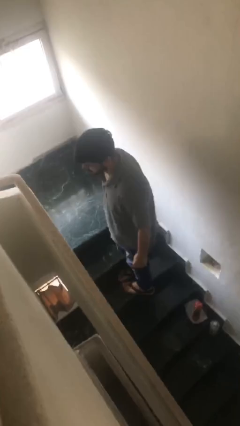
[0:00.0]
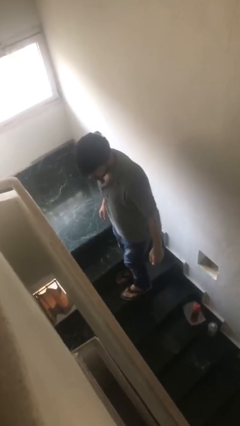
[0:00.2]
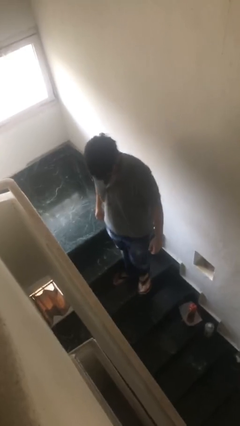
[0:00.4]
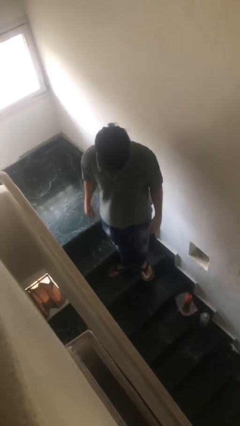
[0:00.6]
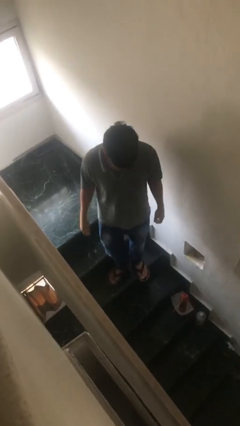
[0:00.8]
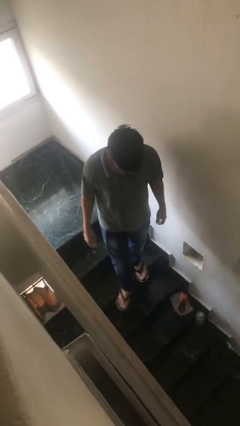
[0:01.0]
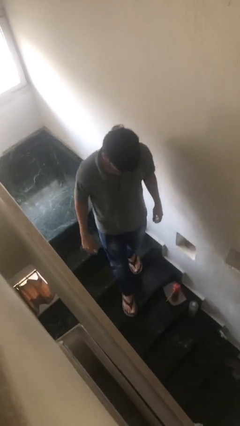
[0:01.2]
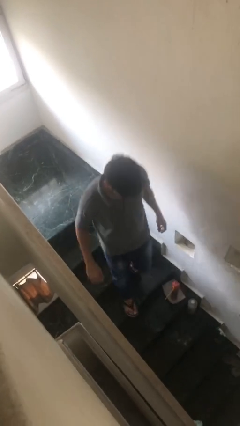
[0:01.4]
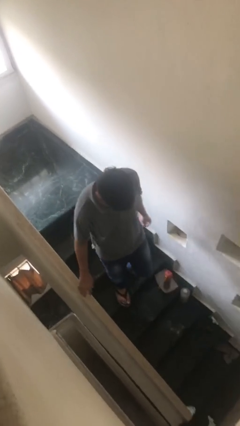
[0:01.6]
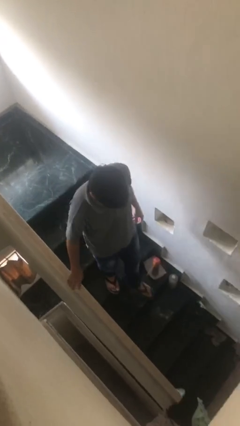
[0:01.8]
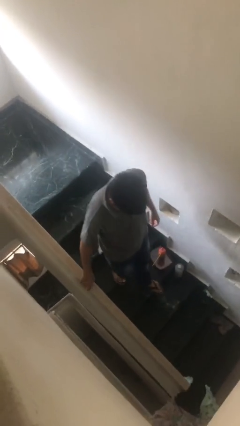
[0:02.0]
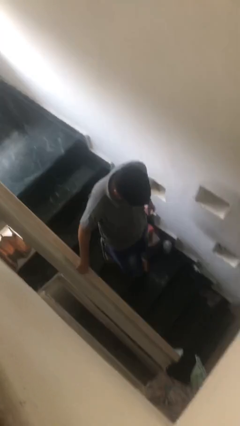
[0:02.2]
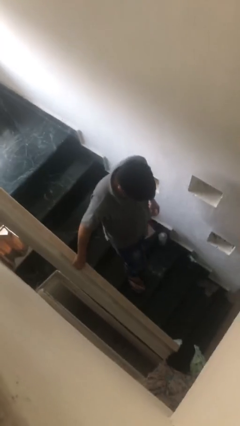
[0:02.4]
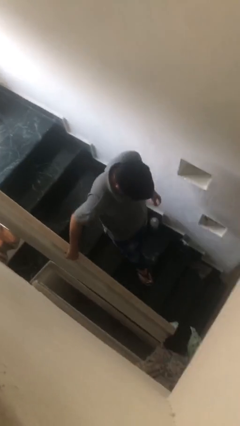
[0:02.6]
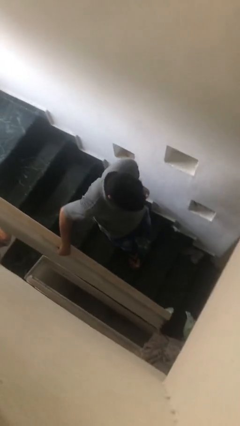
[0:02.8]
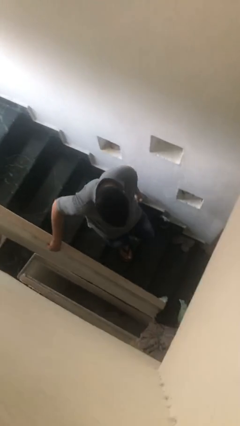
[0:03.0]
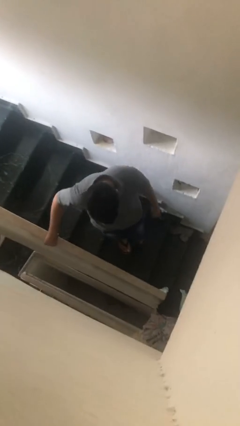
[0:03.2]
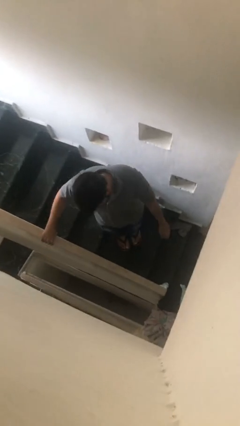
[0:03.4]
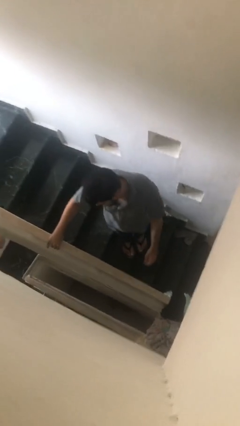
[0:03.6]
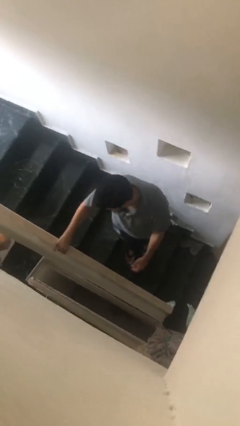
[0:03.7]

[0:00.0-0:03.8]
person climbs down stairs

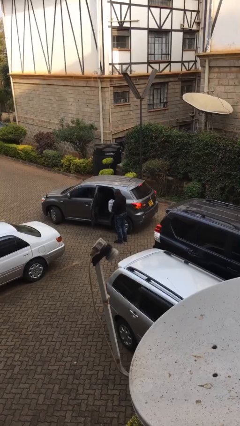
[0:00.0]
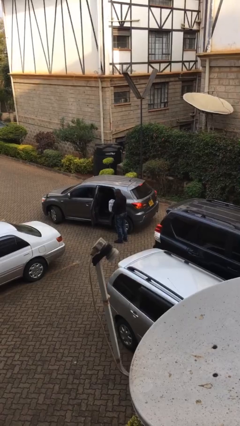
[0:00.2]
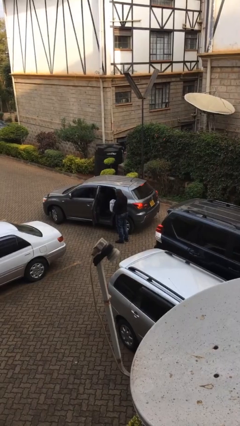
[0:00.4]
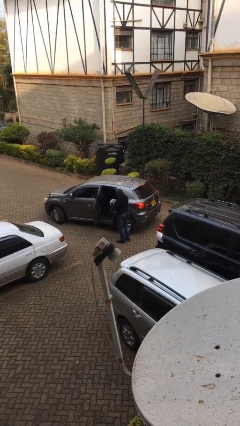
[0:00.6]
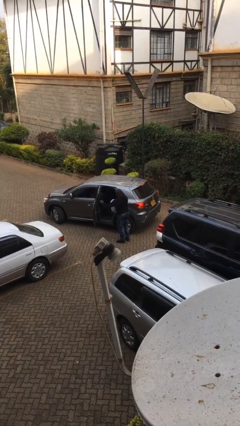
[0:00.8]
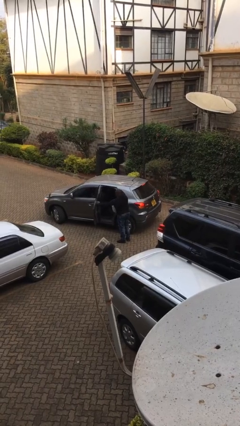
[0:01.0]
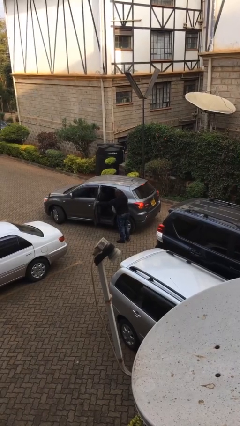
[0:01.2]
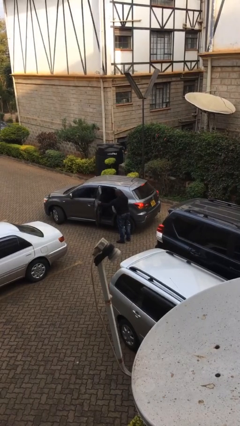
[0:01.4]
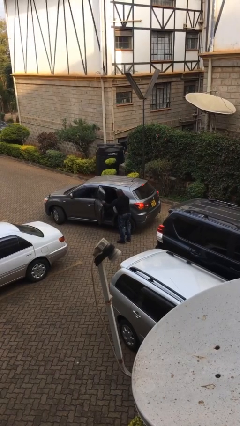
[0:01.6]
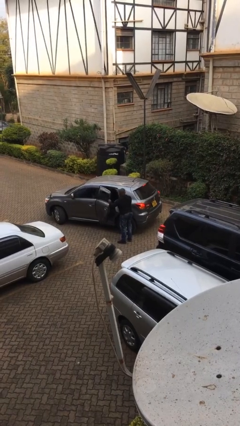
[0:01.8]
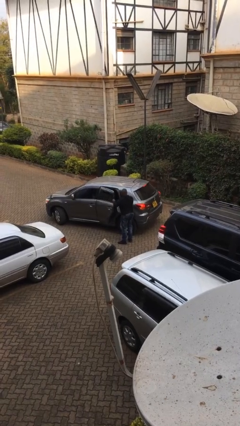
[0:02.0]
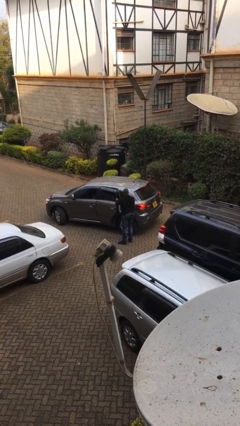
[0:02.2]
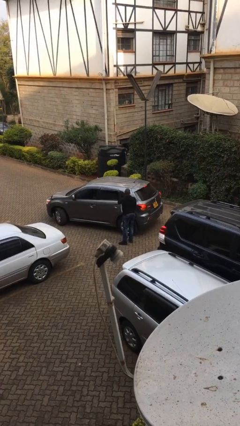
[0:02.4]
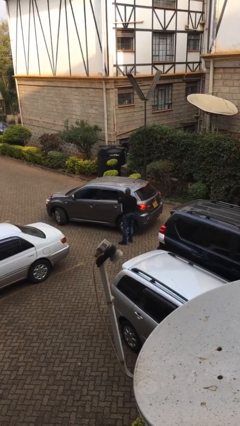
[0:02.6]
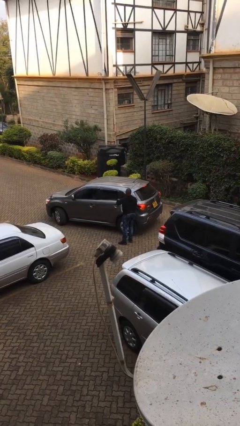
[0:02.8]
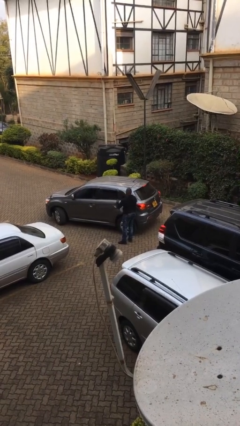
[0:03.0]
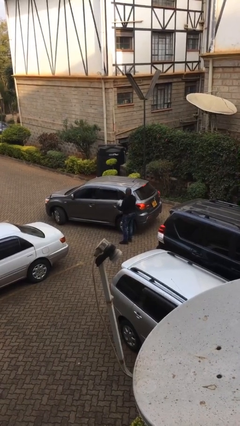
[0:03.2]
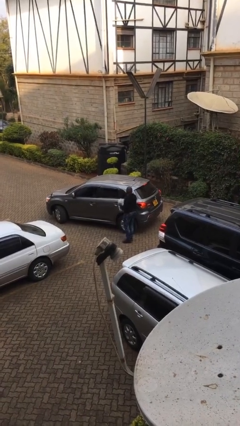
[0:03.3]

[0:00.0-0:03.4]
person closes car door

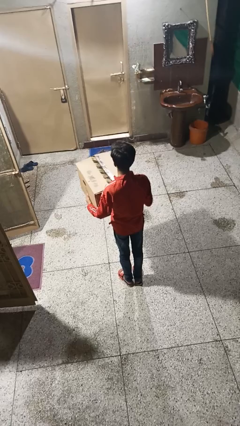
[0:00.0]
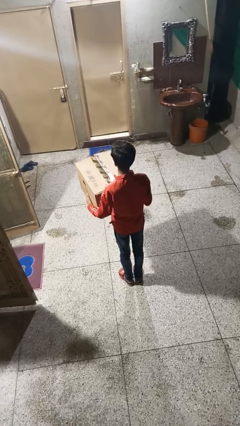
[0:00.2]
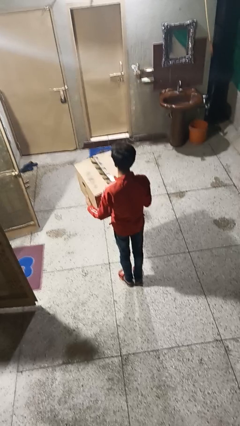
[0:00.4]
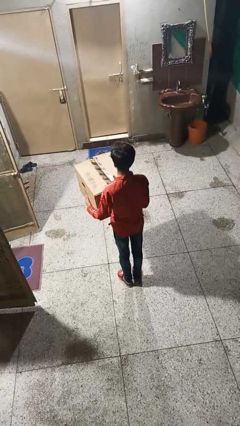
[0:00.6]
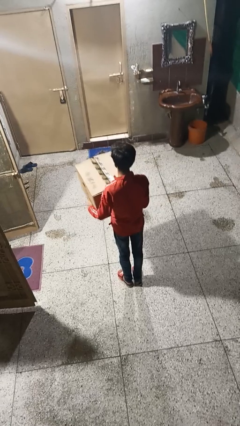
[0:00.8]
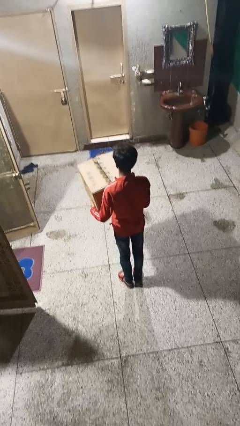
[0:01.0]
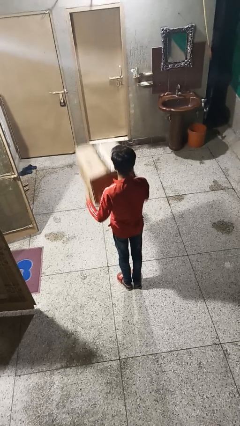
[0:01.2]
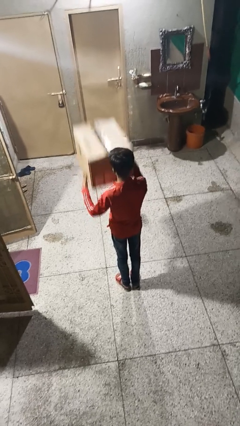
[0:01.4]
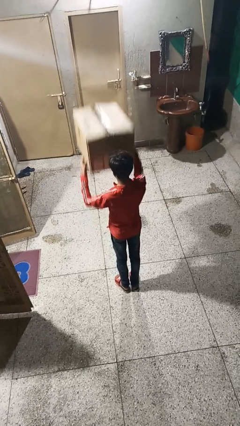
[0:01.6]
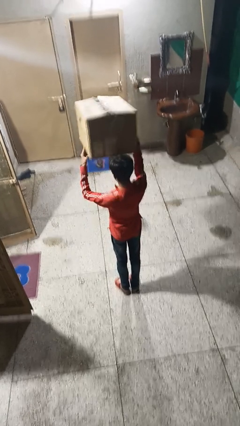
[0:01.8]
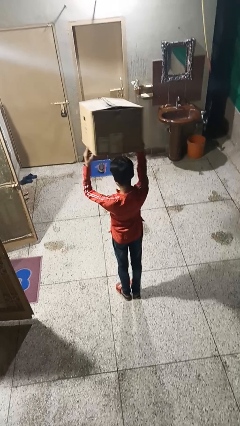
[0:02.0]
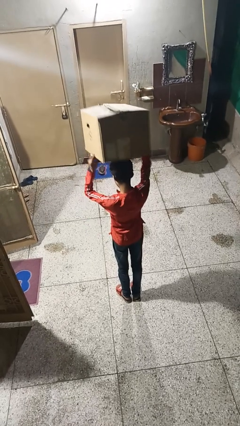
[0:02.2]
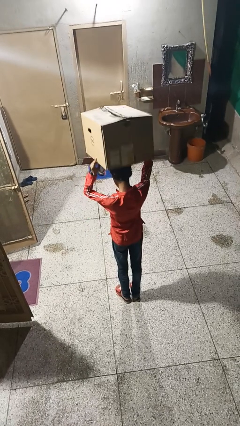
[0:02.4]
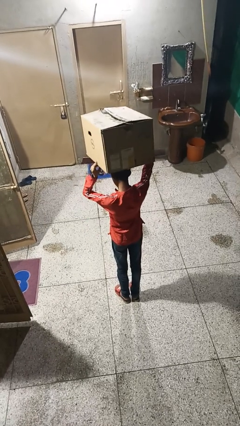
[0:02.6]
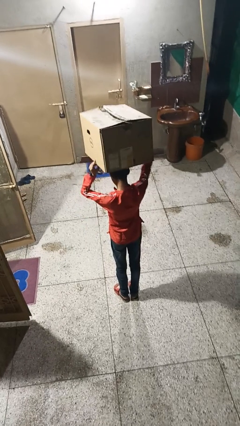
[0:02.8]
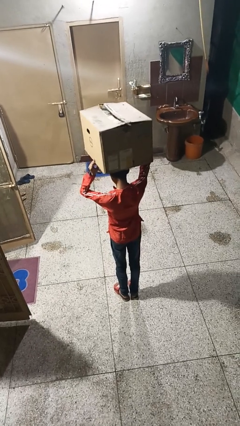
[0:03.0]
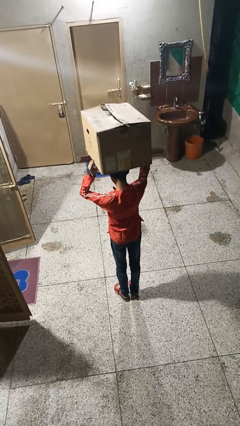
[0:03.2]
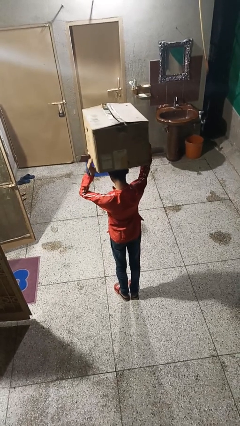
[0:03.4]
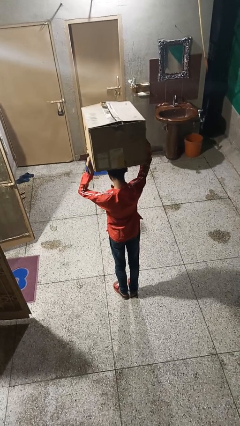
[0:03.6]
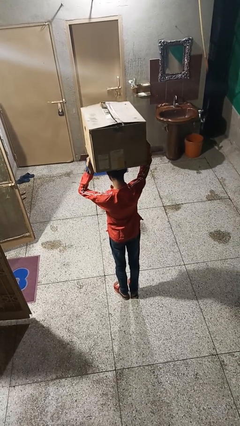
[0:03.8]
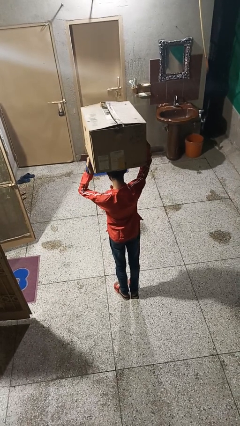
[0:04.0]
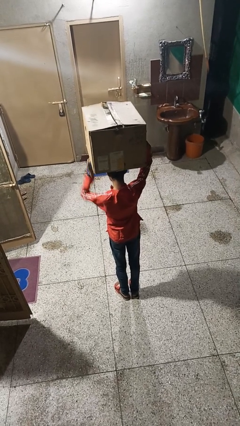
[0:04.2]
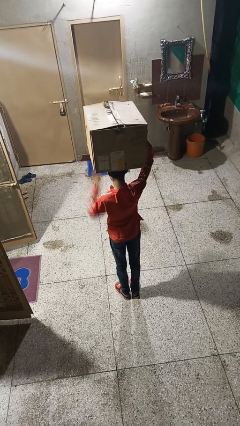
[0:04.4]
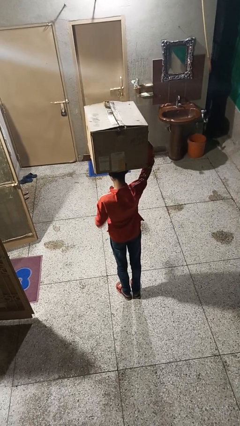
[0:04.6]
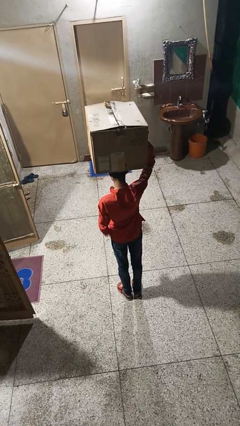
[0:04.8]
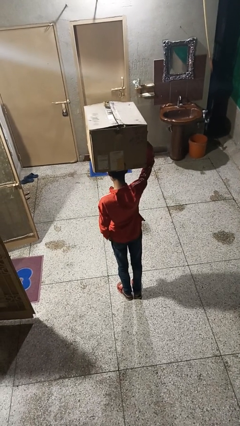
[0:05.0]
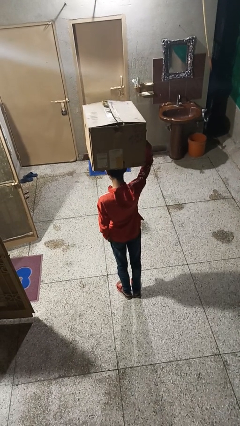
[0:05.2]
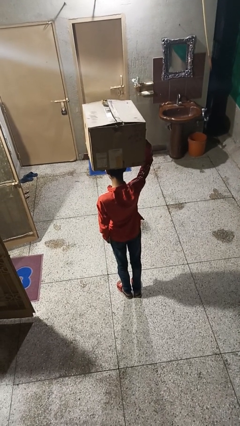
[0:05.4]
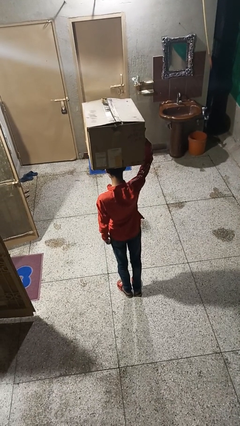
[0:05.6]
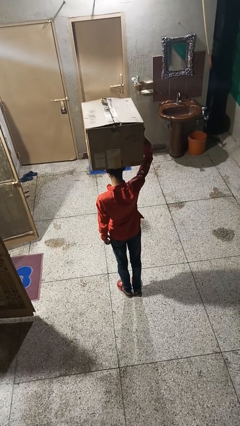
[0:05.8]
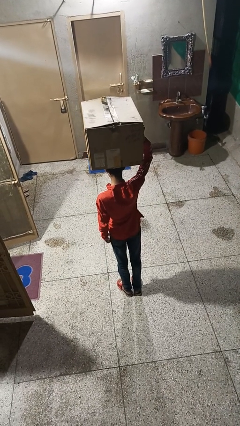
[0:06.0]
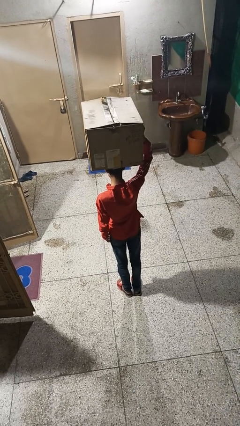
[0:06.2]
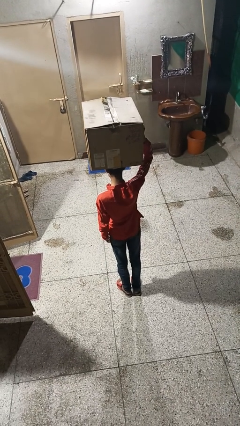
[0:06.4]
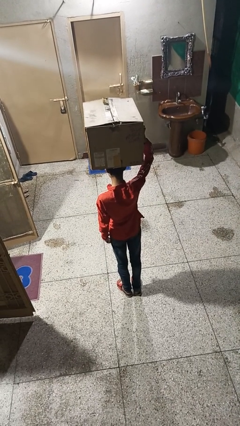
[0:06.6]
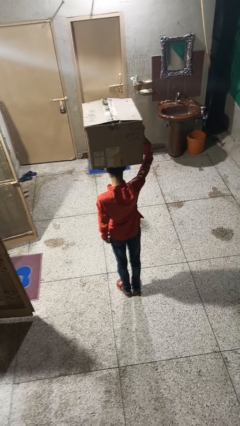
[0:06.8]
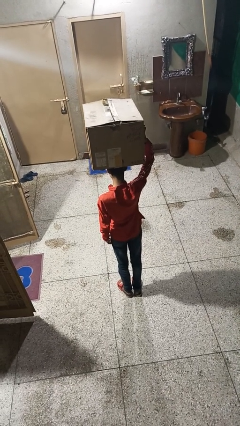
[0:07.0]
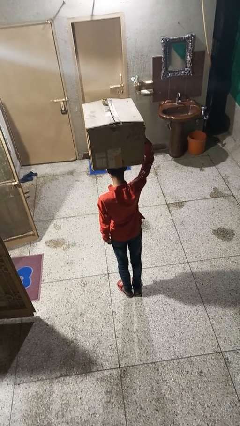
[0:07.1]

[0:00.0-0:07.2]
person holds object above head

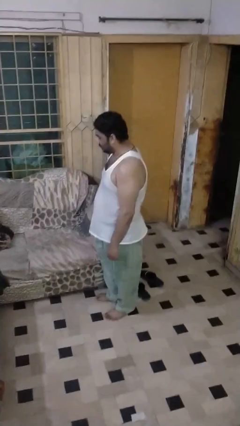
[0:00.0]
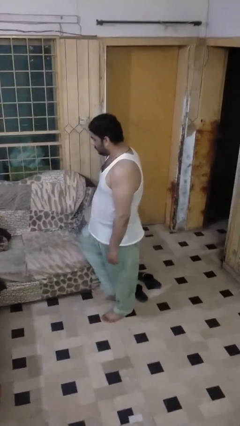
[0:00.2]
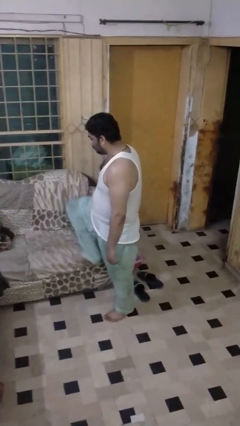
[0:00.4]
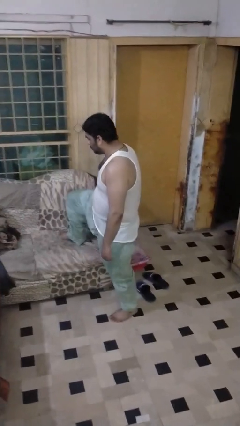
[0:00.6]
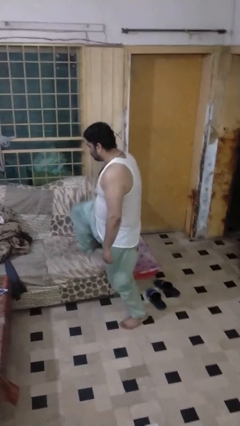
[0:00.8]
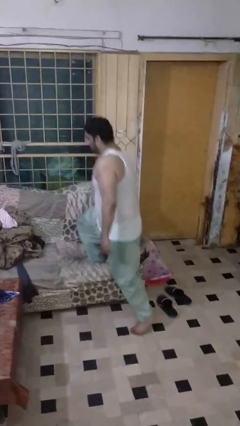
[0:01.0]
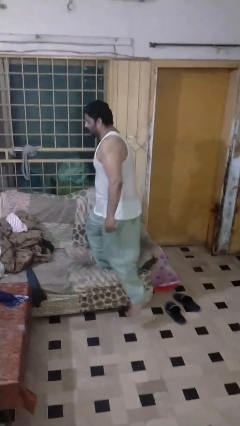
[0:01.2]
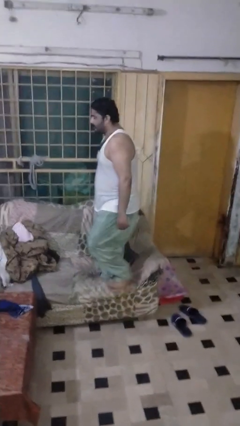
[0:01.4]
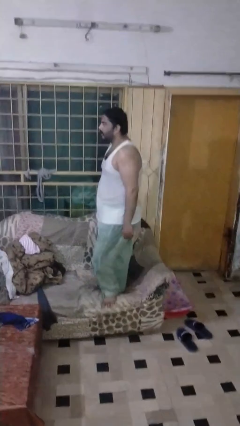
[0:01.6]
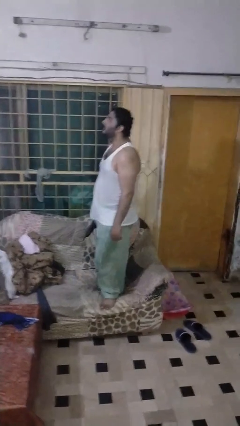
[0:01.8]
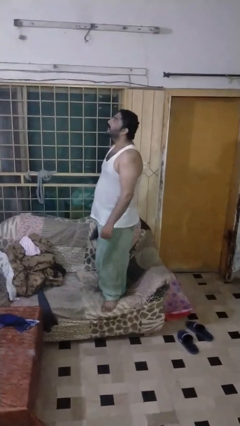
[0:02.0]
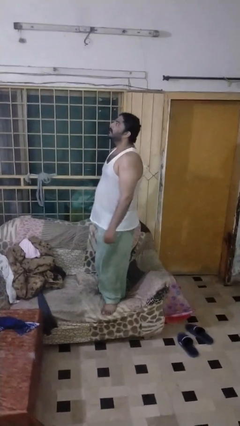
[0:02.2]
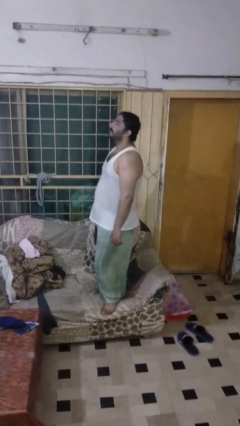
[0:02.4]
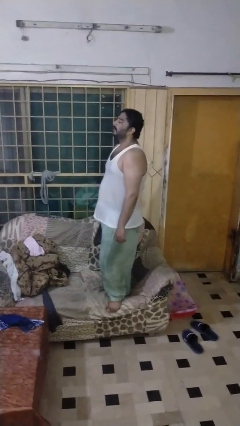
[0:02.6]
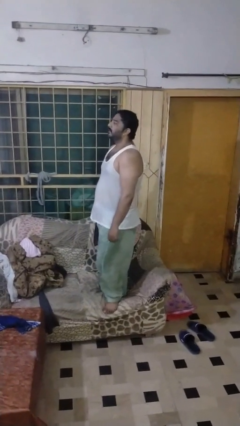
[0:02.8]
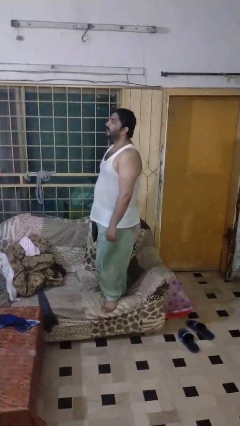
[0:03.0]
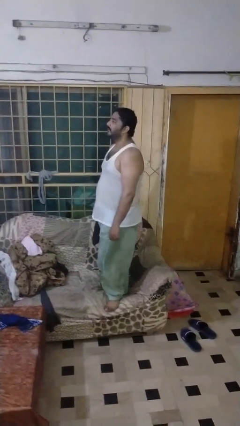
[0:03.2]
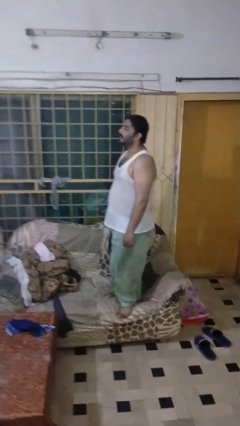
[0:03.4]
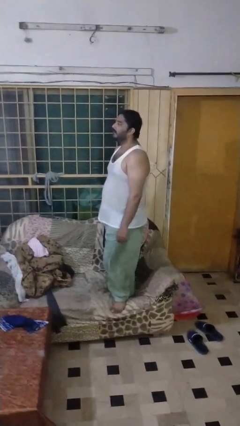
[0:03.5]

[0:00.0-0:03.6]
person climbs on couch
